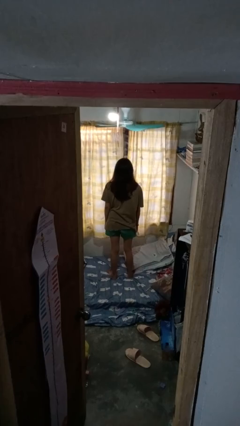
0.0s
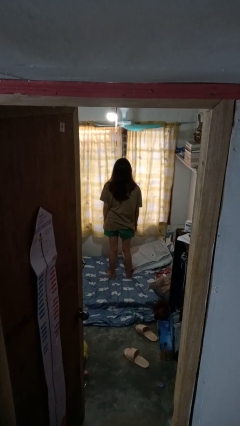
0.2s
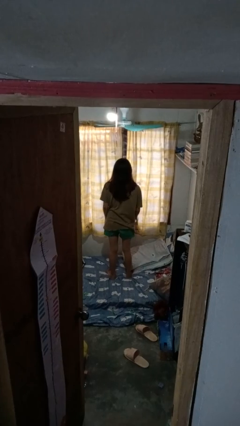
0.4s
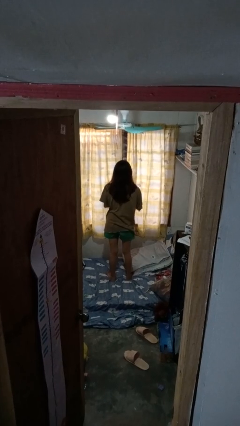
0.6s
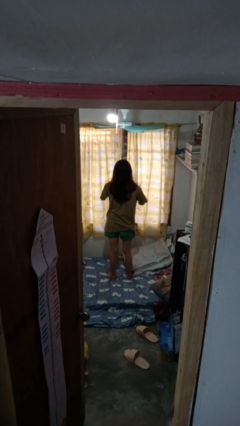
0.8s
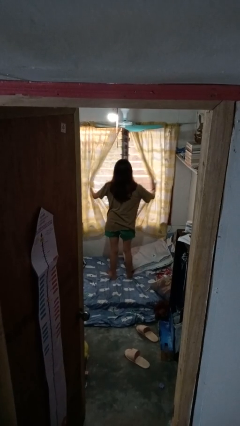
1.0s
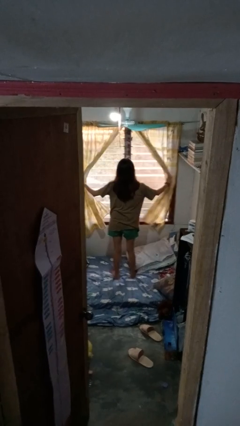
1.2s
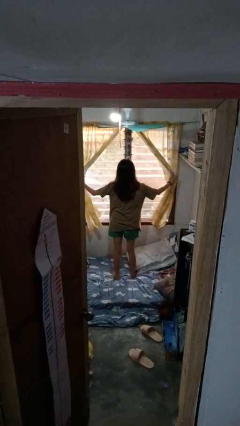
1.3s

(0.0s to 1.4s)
person opens curtains

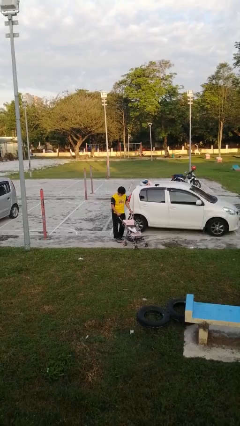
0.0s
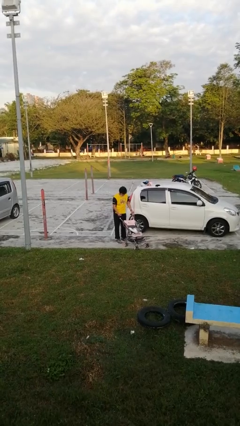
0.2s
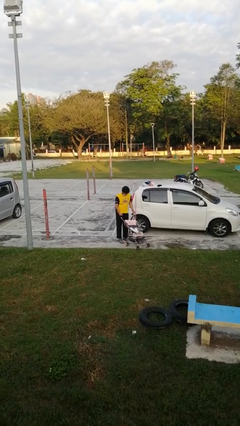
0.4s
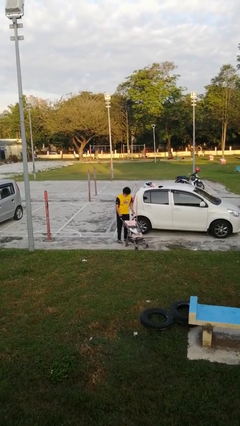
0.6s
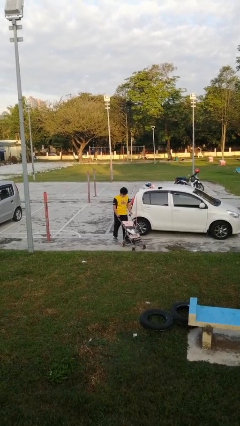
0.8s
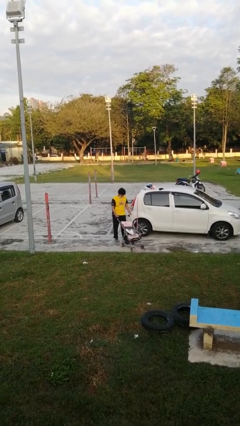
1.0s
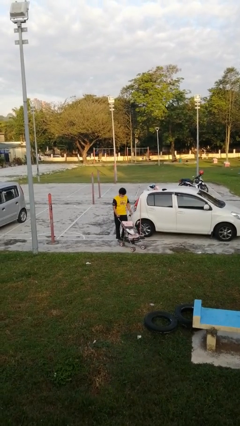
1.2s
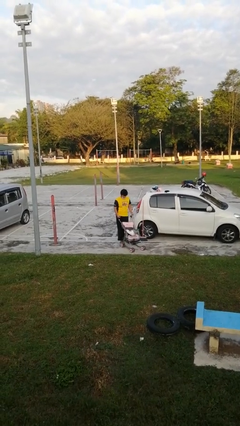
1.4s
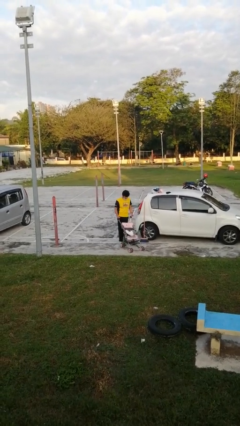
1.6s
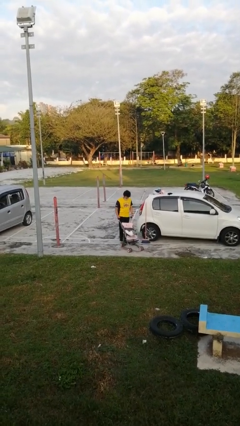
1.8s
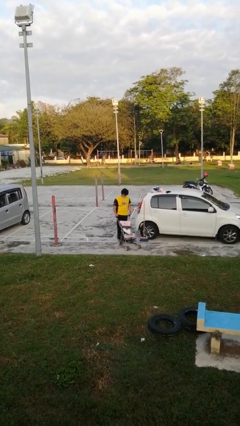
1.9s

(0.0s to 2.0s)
person pulls wheeled cart

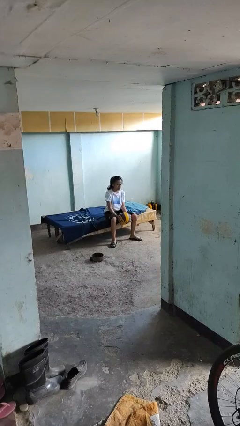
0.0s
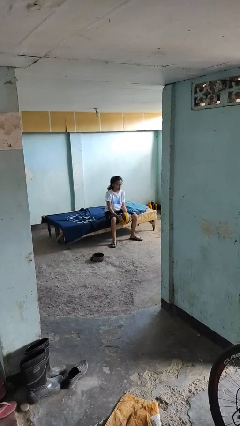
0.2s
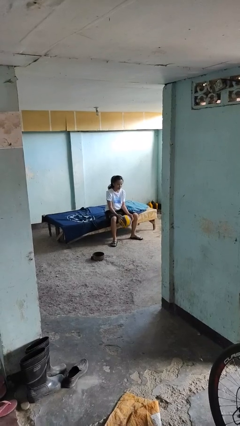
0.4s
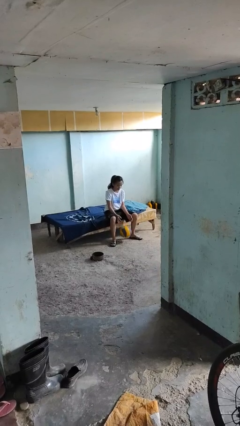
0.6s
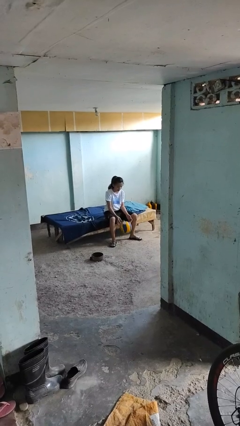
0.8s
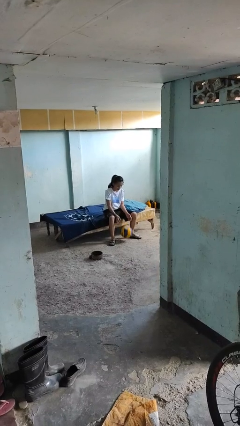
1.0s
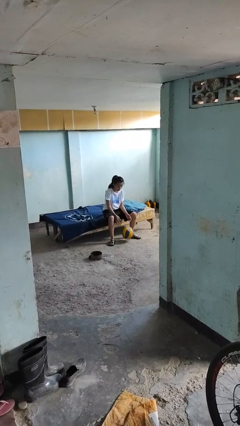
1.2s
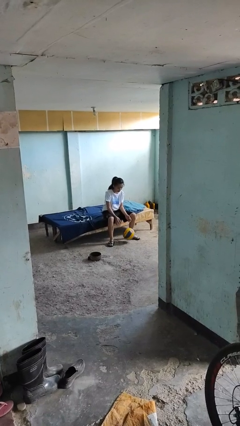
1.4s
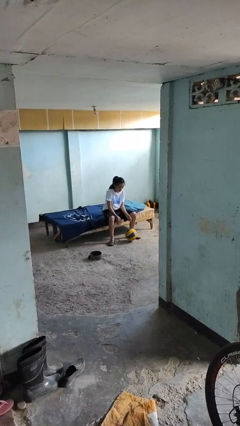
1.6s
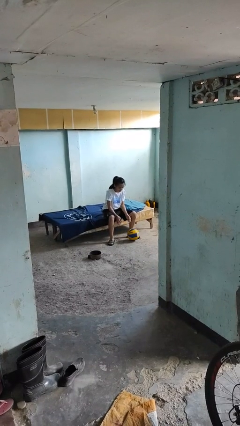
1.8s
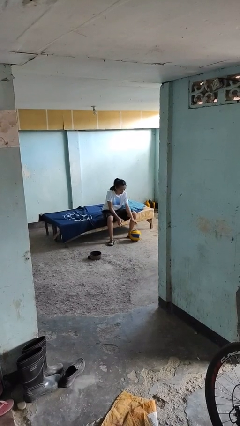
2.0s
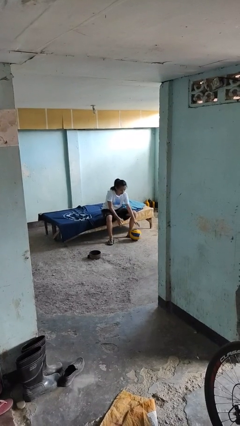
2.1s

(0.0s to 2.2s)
person drops object

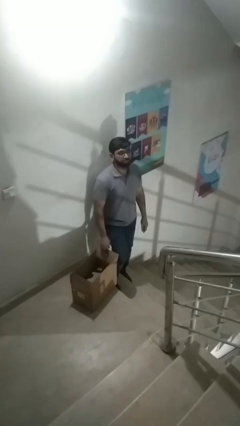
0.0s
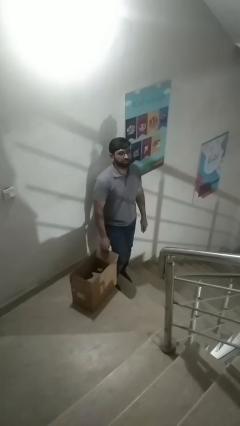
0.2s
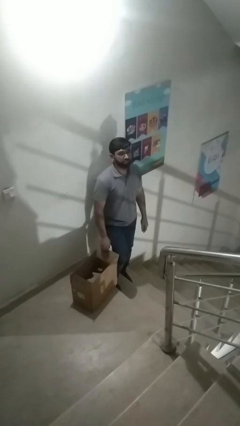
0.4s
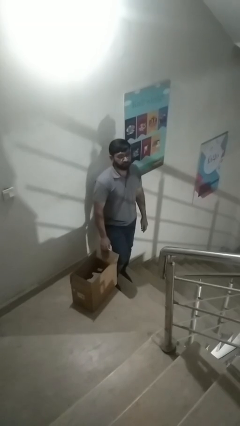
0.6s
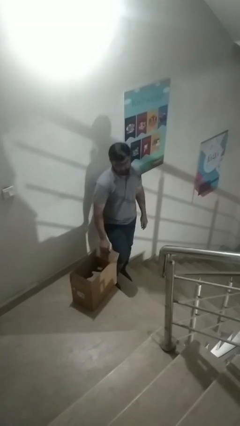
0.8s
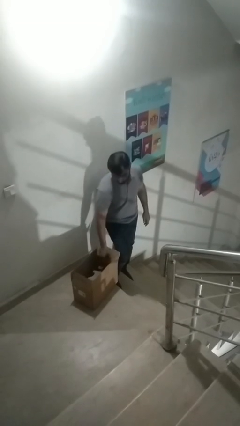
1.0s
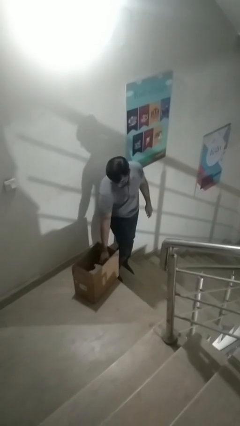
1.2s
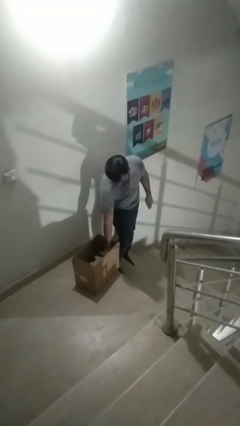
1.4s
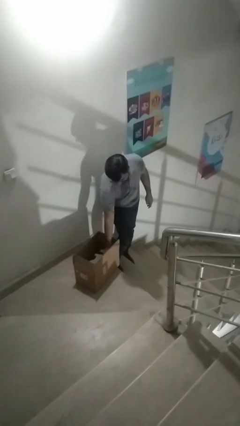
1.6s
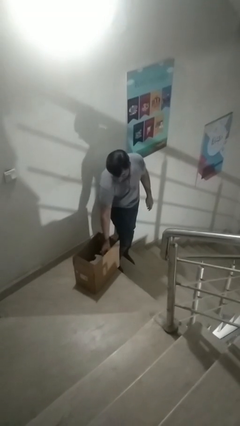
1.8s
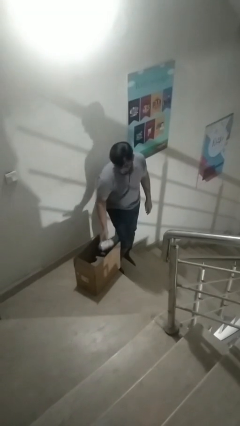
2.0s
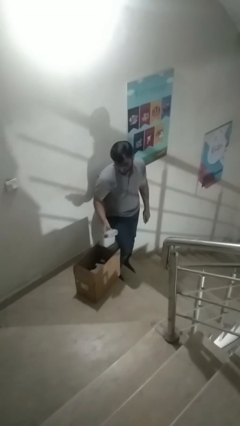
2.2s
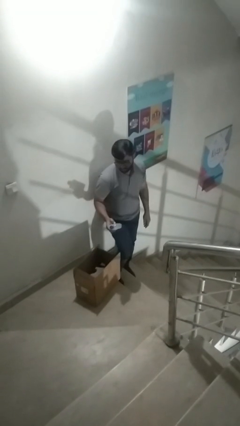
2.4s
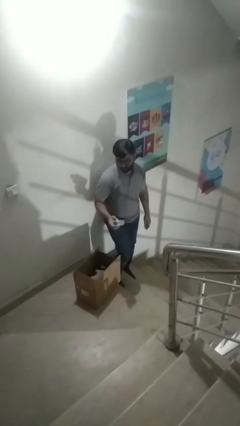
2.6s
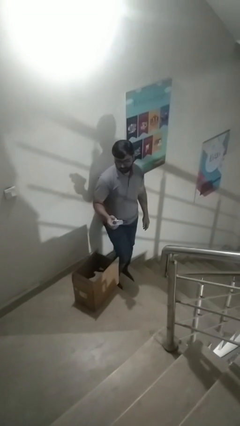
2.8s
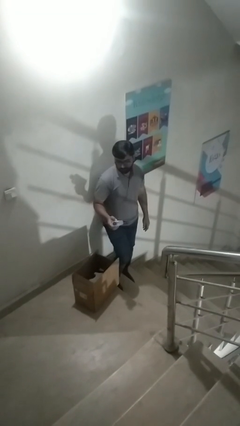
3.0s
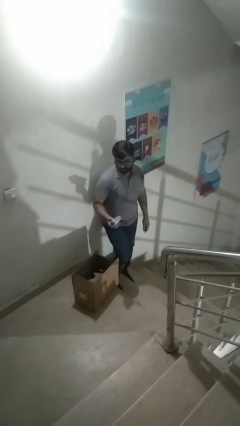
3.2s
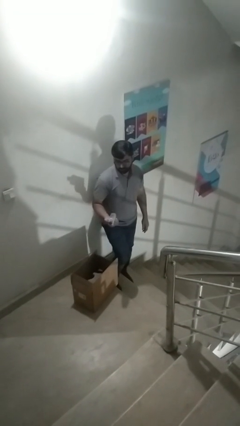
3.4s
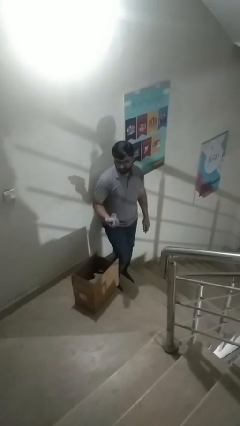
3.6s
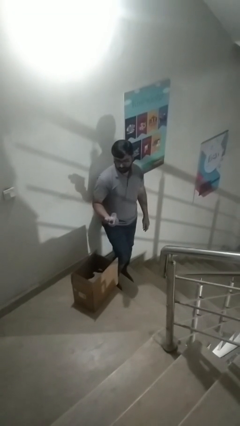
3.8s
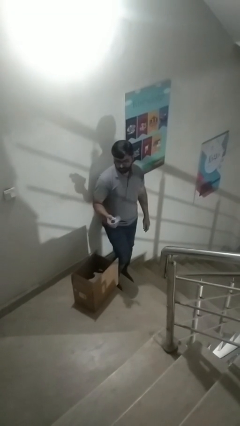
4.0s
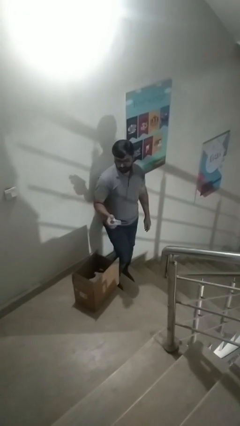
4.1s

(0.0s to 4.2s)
person takes object from box

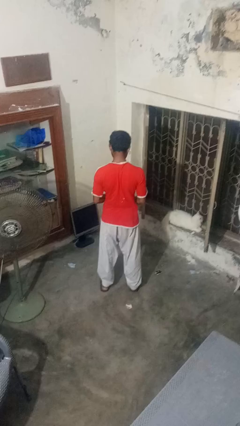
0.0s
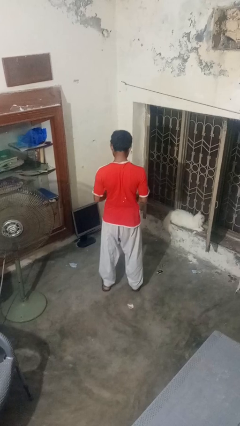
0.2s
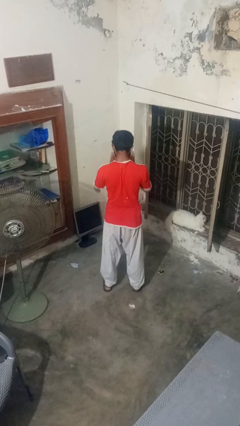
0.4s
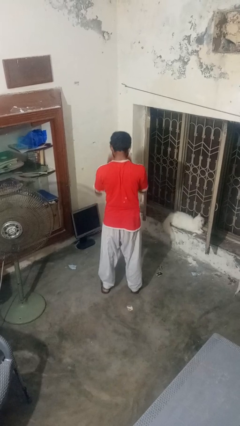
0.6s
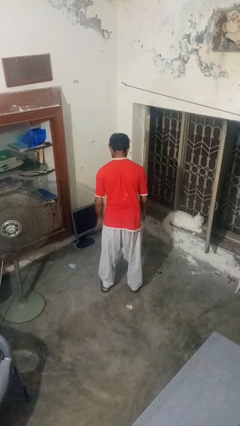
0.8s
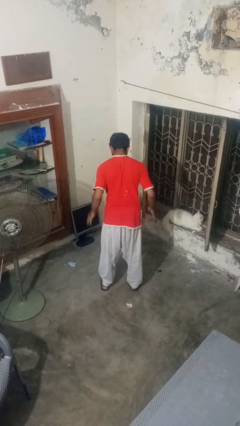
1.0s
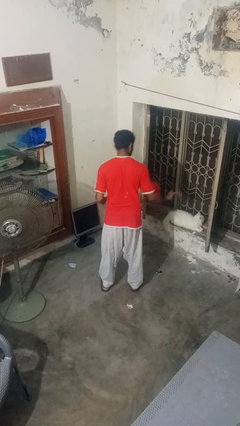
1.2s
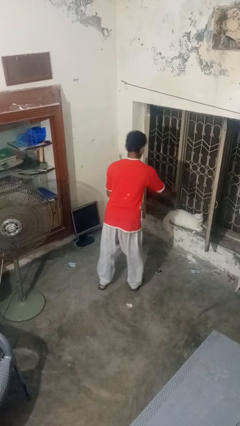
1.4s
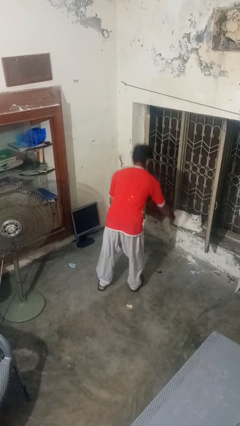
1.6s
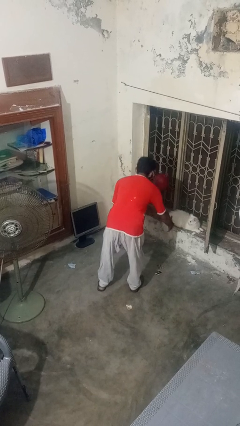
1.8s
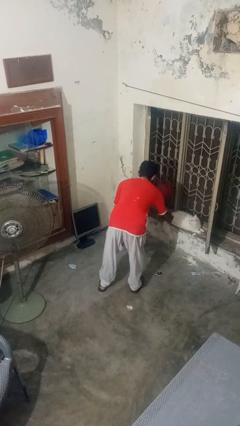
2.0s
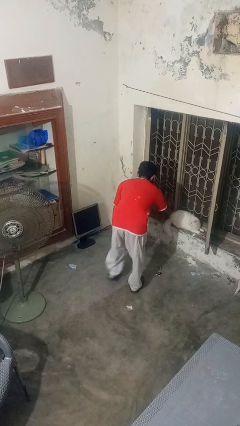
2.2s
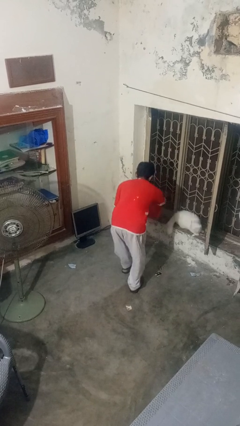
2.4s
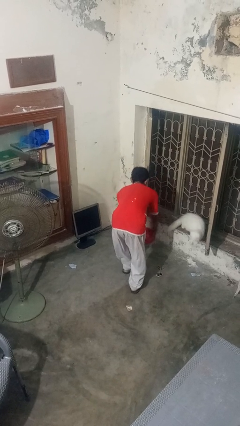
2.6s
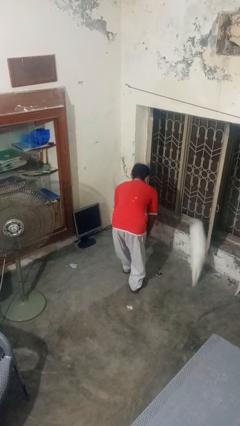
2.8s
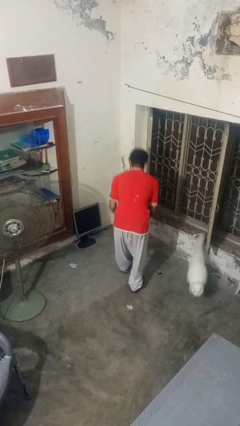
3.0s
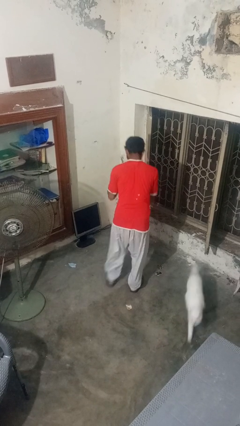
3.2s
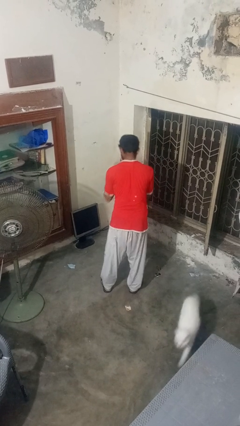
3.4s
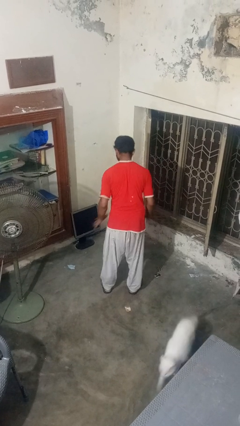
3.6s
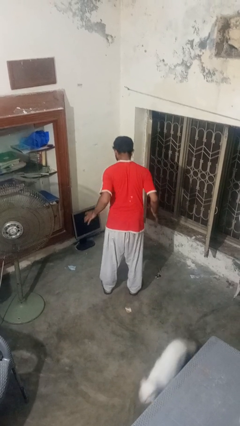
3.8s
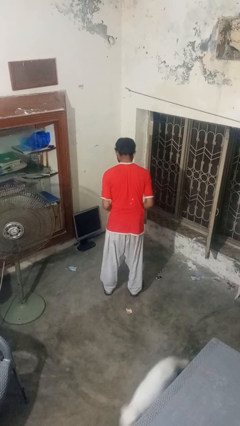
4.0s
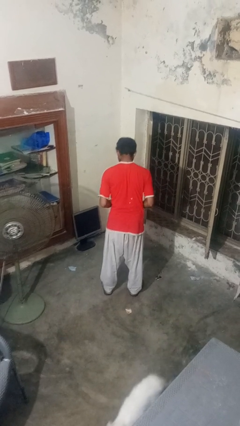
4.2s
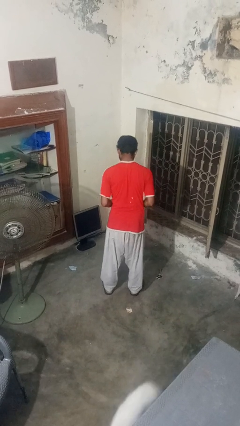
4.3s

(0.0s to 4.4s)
person bounces ball on floor

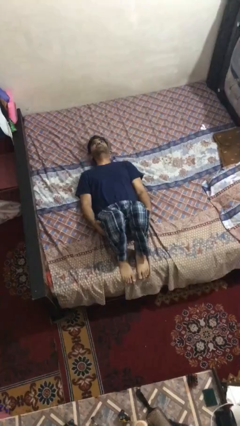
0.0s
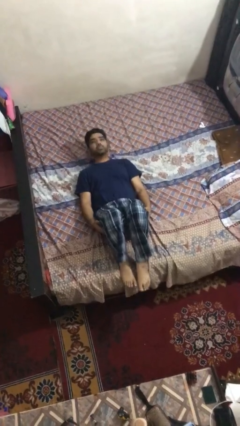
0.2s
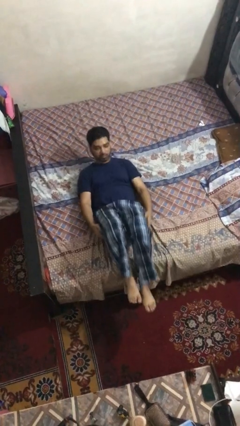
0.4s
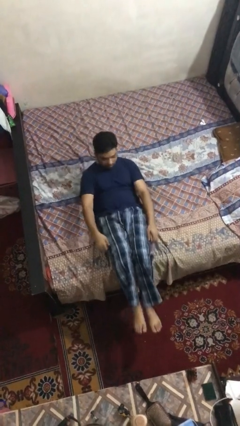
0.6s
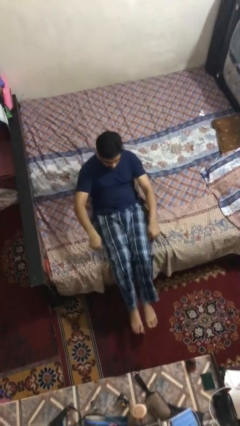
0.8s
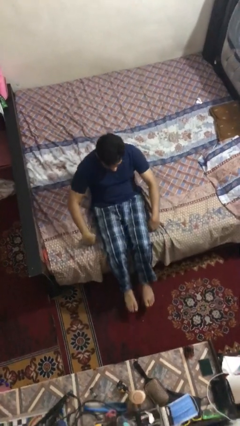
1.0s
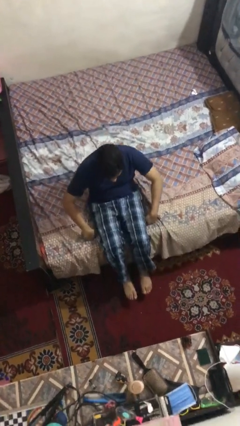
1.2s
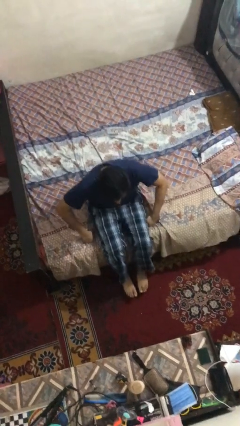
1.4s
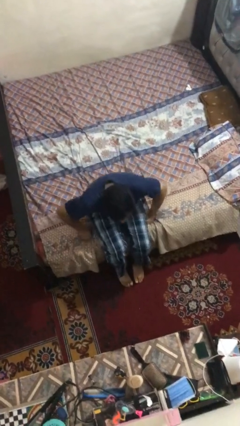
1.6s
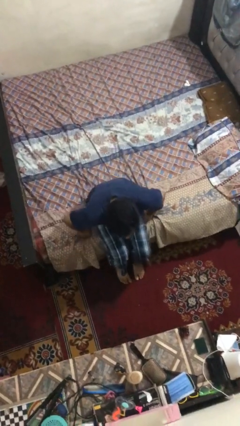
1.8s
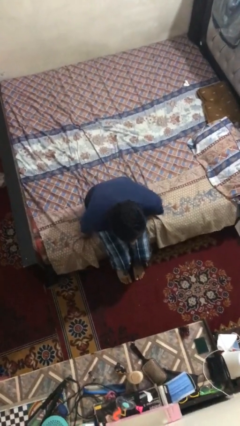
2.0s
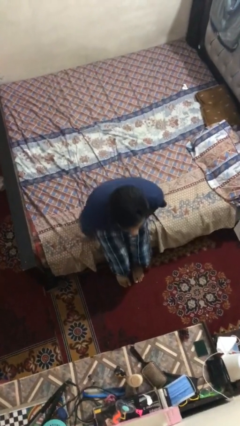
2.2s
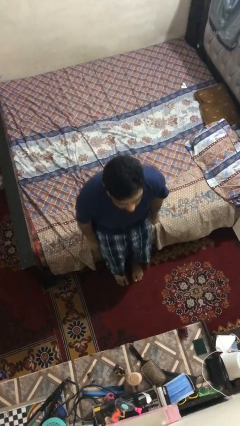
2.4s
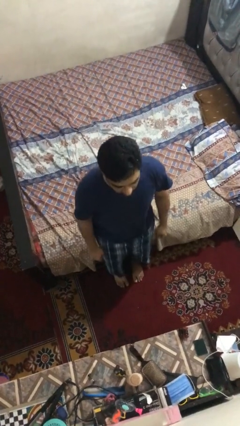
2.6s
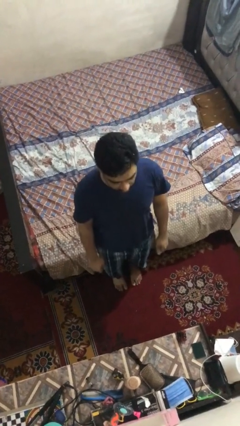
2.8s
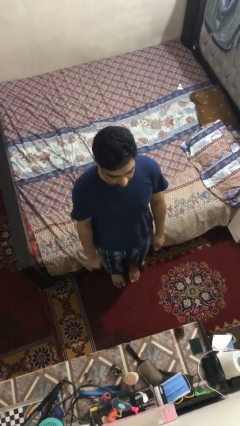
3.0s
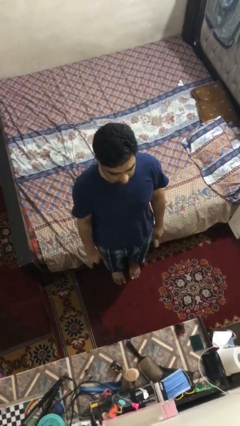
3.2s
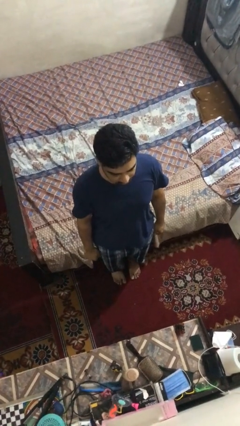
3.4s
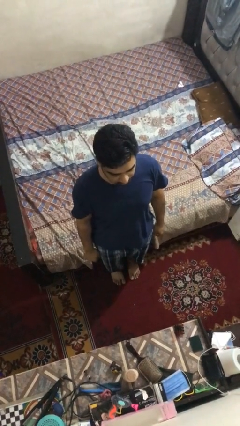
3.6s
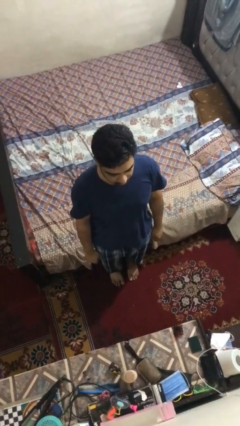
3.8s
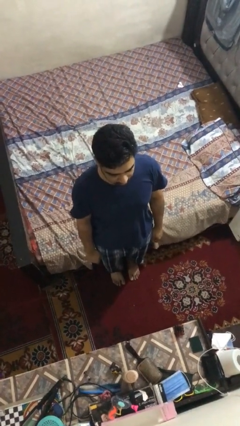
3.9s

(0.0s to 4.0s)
person stands up
